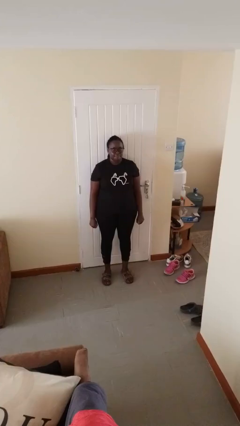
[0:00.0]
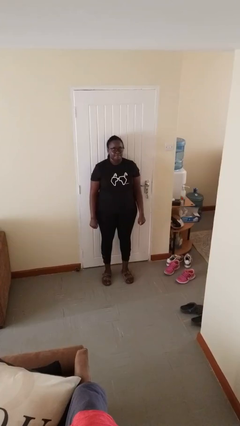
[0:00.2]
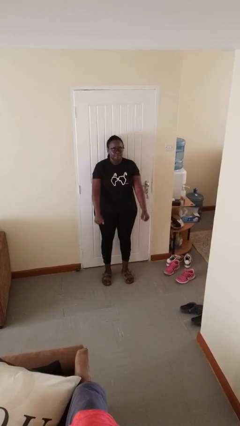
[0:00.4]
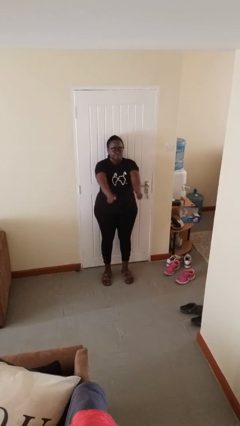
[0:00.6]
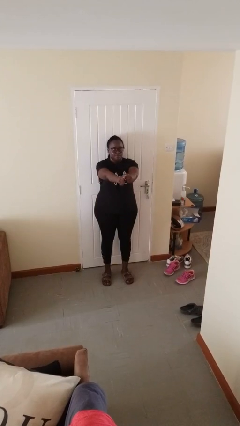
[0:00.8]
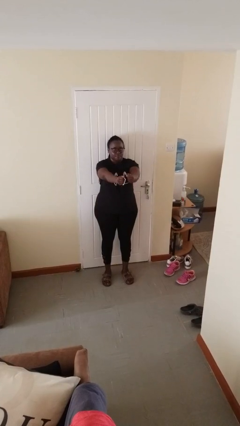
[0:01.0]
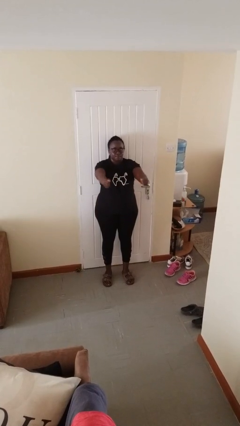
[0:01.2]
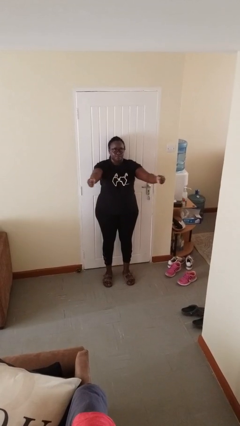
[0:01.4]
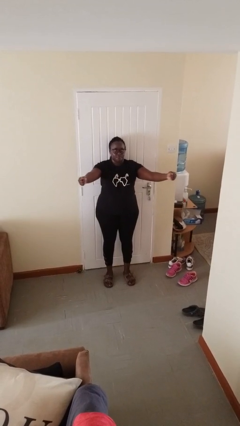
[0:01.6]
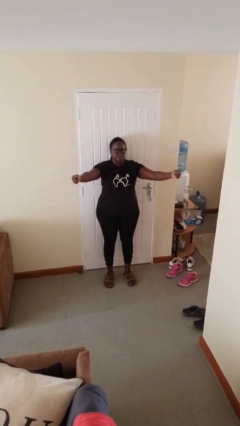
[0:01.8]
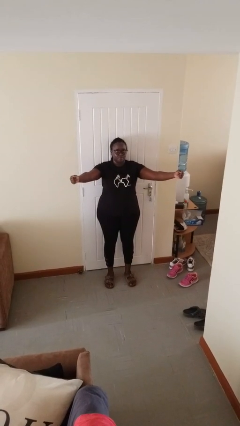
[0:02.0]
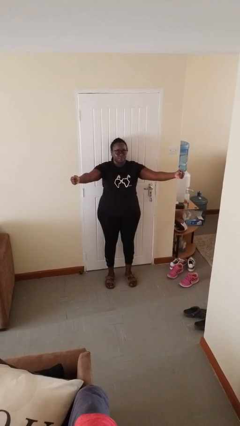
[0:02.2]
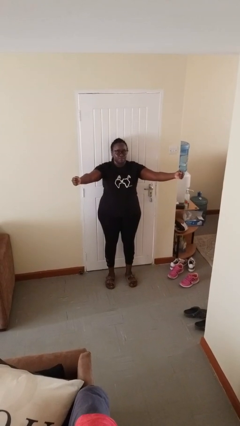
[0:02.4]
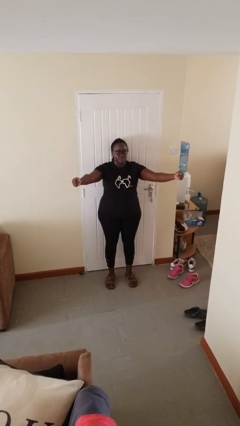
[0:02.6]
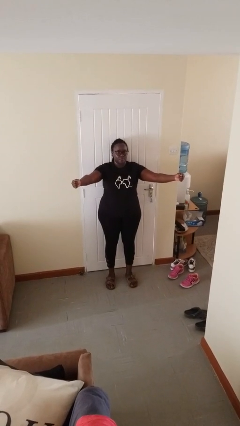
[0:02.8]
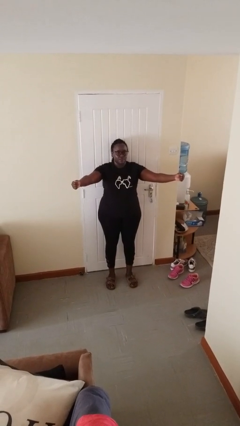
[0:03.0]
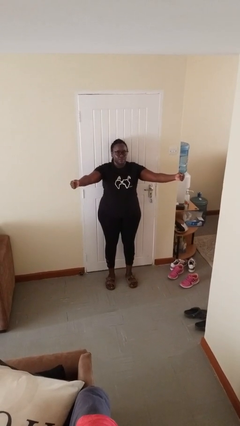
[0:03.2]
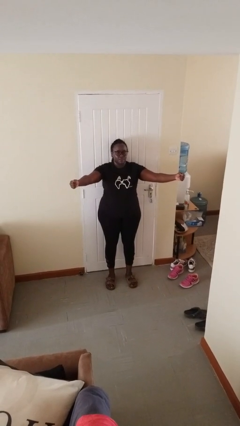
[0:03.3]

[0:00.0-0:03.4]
person gestures zoom in

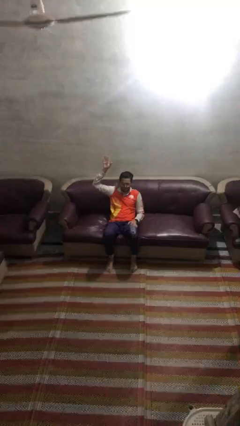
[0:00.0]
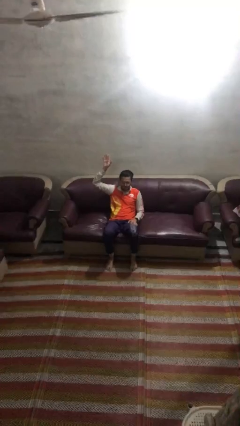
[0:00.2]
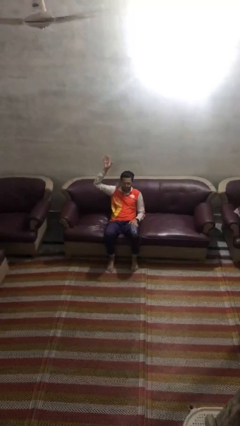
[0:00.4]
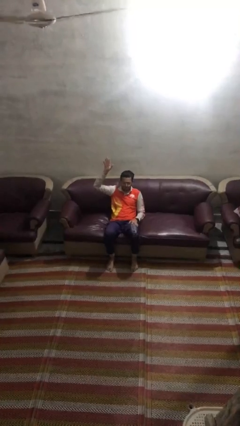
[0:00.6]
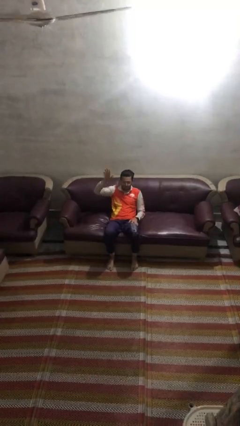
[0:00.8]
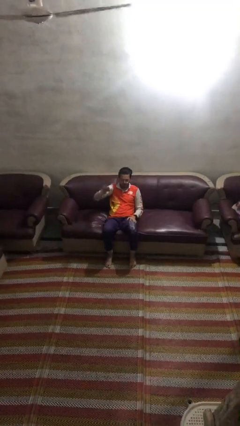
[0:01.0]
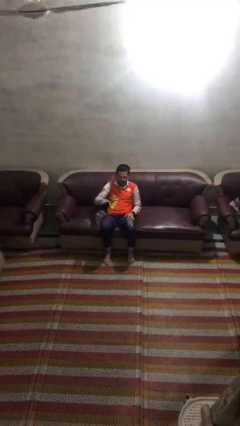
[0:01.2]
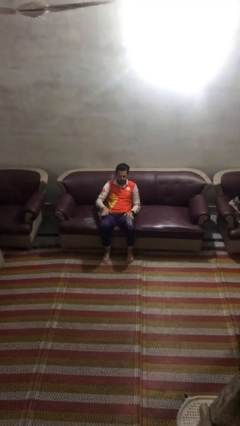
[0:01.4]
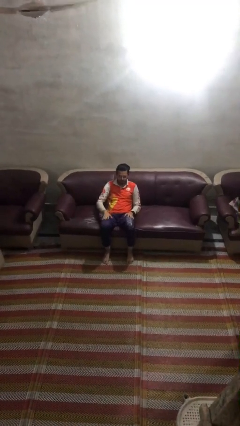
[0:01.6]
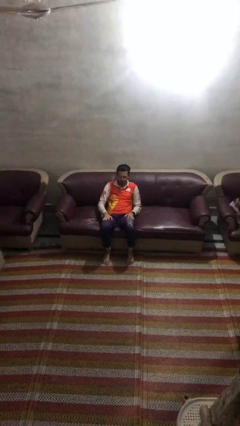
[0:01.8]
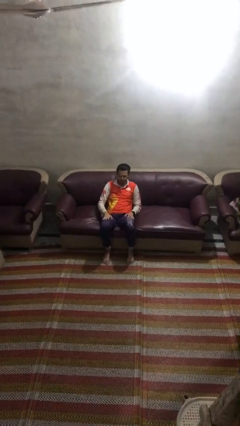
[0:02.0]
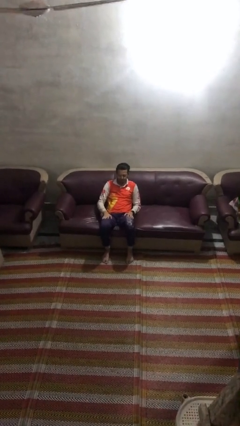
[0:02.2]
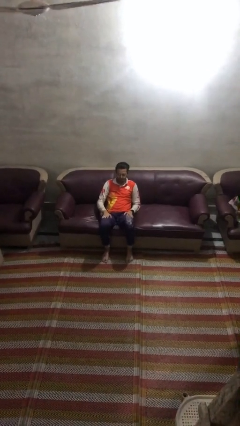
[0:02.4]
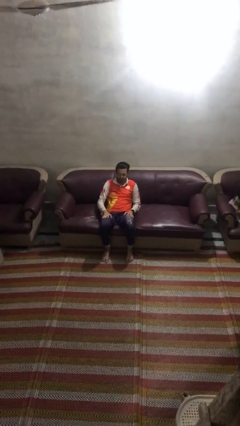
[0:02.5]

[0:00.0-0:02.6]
person gestures lower hand

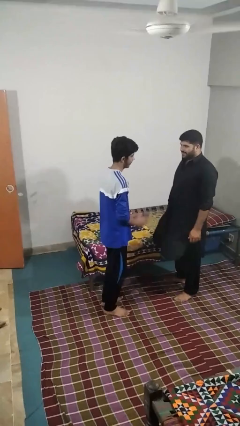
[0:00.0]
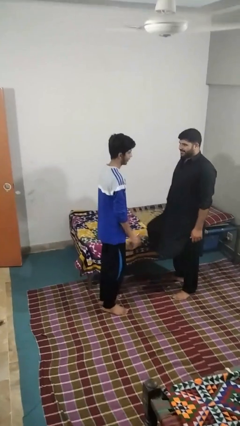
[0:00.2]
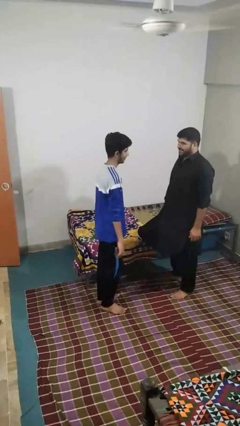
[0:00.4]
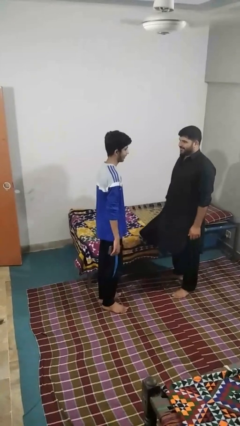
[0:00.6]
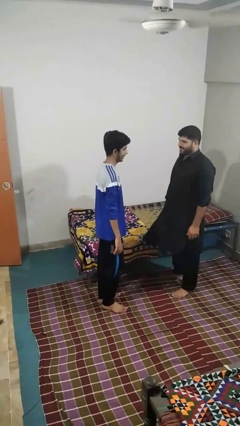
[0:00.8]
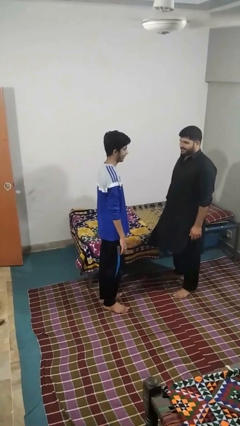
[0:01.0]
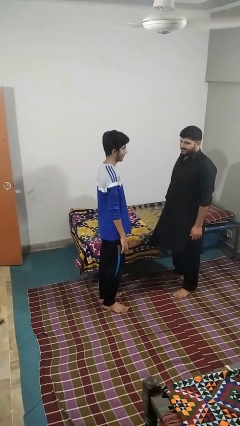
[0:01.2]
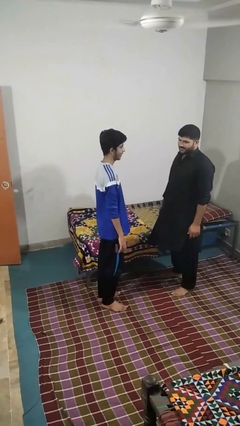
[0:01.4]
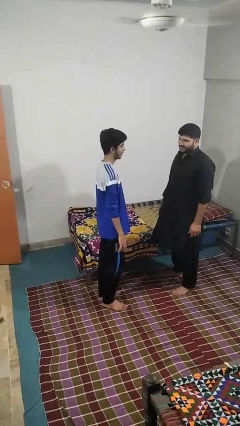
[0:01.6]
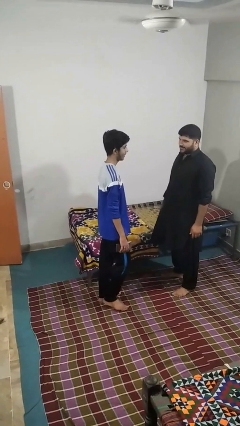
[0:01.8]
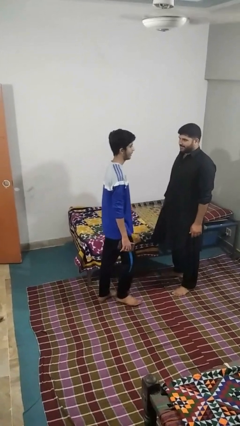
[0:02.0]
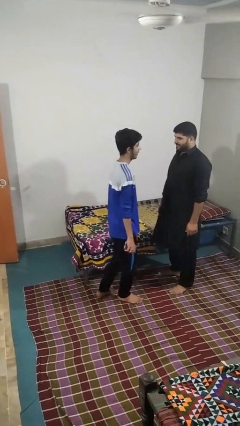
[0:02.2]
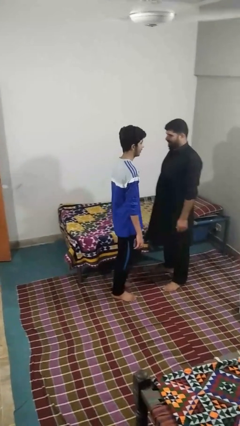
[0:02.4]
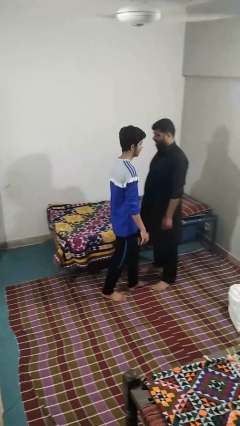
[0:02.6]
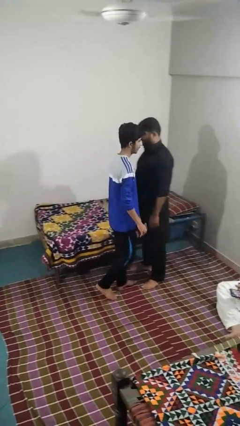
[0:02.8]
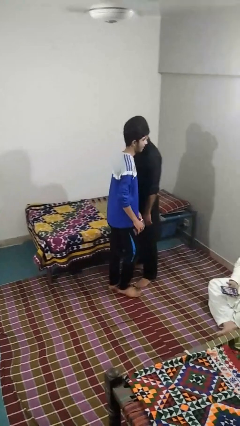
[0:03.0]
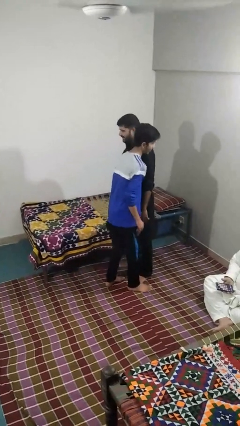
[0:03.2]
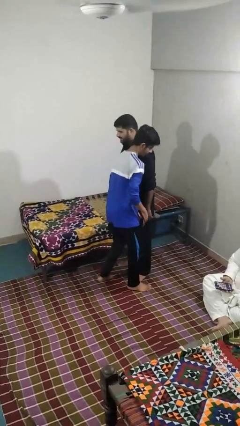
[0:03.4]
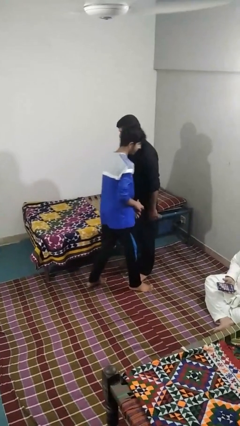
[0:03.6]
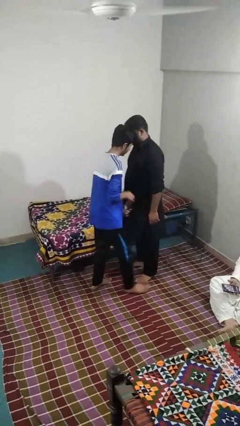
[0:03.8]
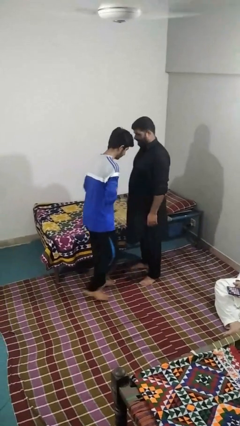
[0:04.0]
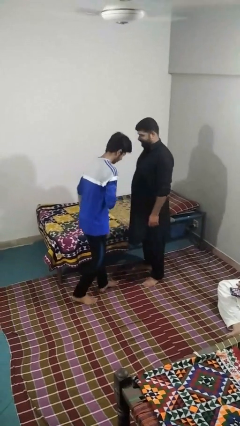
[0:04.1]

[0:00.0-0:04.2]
person bumps into person

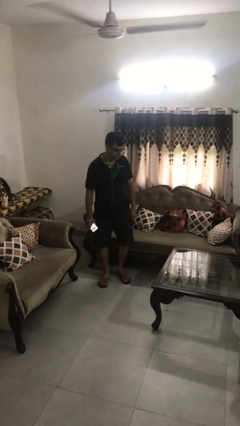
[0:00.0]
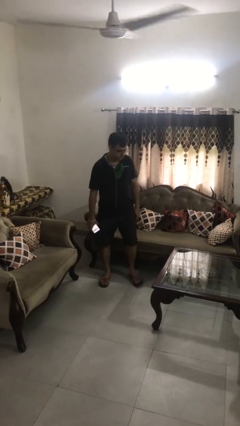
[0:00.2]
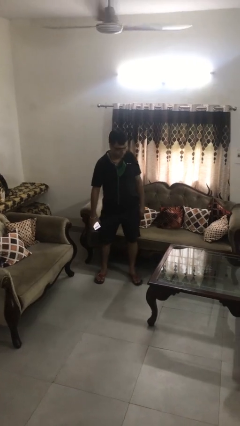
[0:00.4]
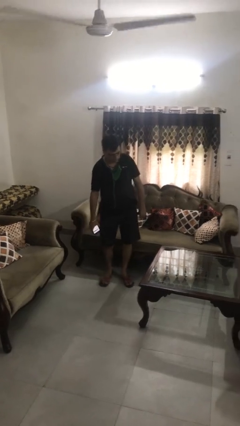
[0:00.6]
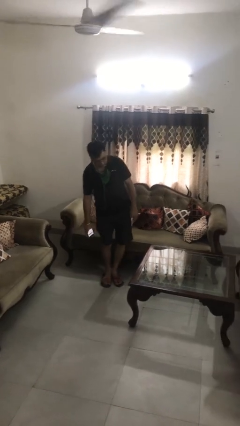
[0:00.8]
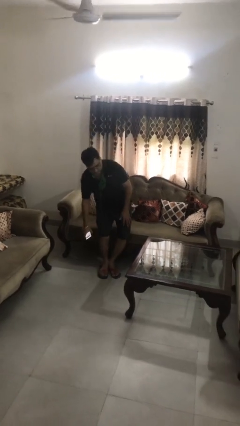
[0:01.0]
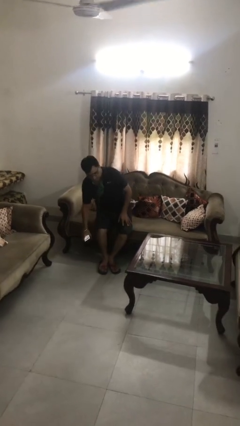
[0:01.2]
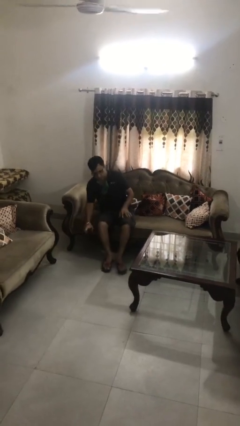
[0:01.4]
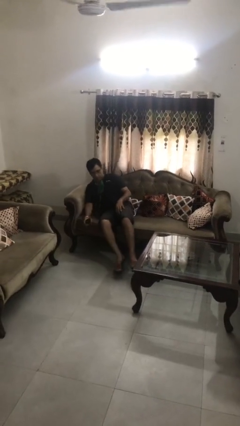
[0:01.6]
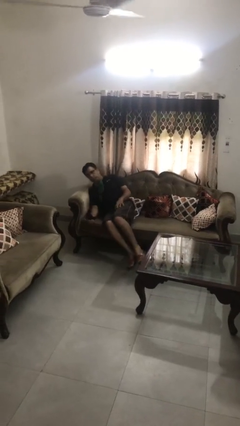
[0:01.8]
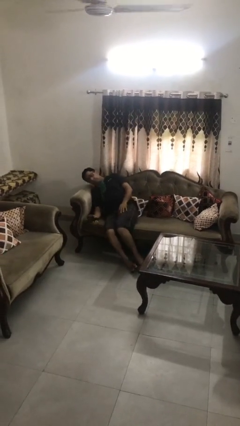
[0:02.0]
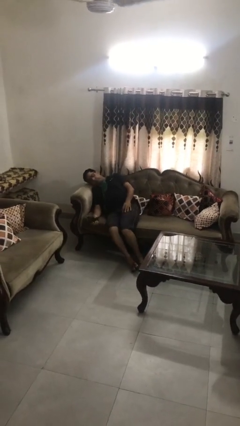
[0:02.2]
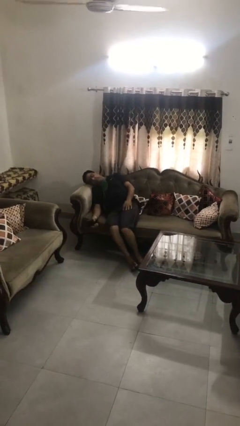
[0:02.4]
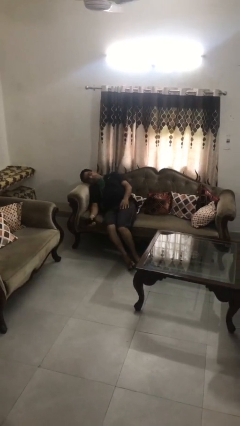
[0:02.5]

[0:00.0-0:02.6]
person lies down on couch

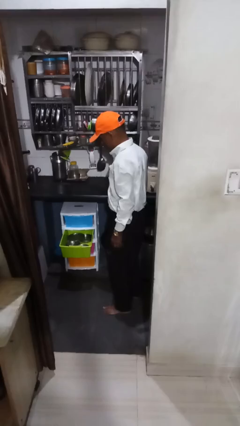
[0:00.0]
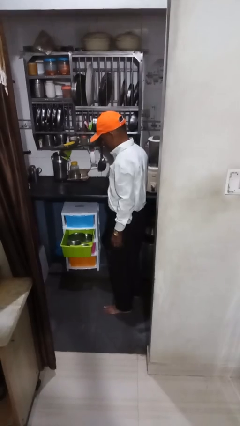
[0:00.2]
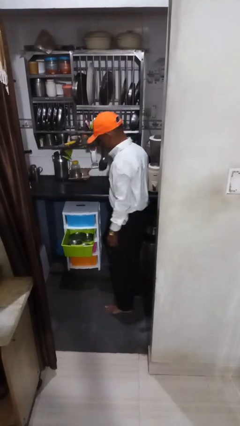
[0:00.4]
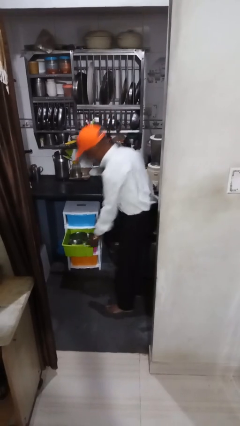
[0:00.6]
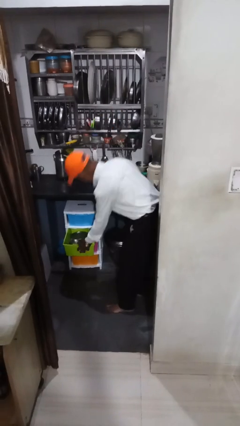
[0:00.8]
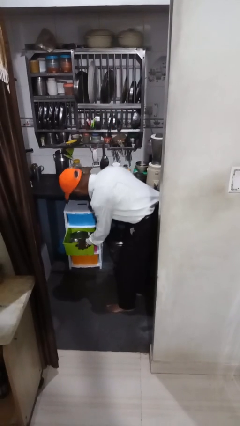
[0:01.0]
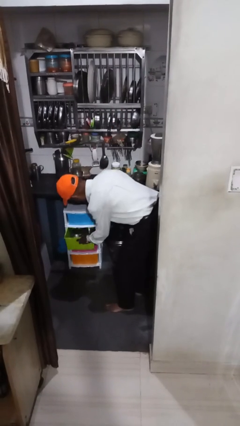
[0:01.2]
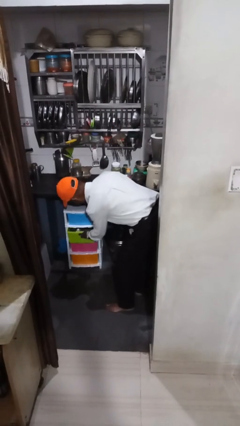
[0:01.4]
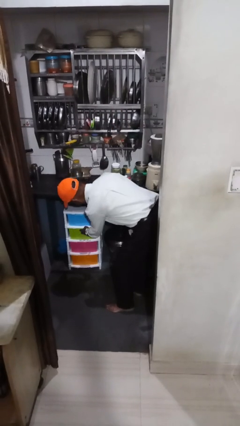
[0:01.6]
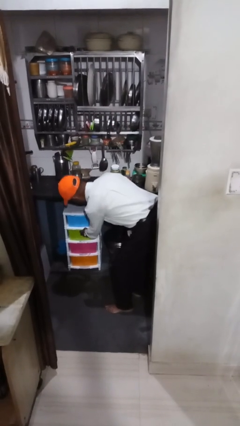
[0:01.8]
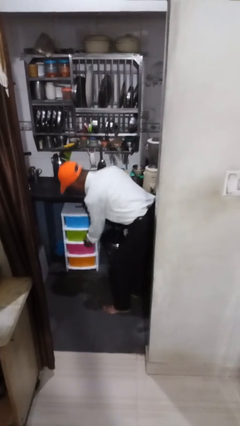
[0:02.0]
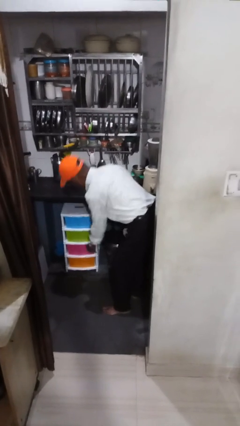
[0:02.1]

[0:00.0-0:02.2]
person closes kitchen drawer

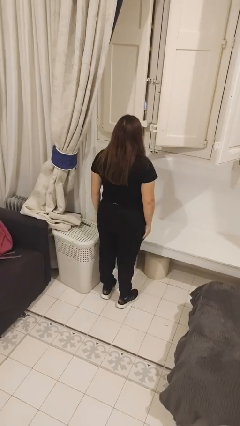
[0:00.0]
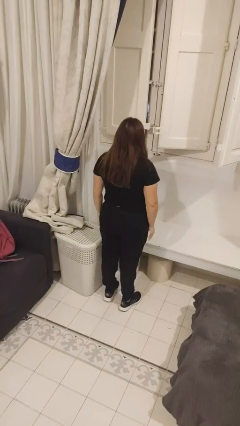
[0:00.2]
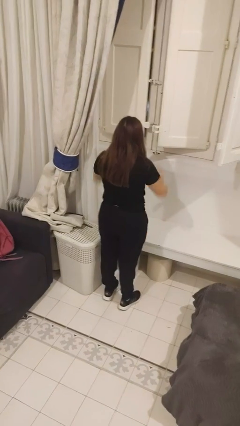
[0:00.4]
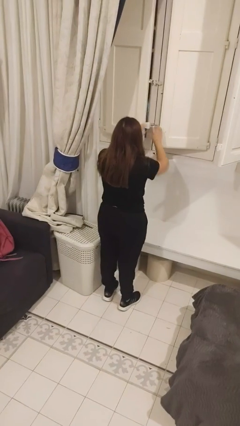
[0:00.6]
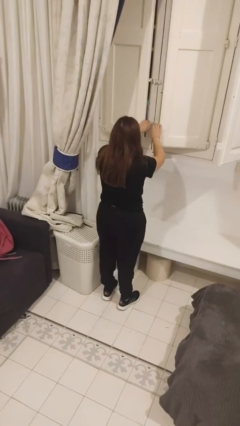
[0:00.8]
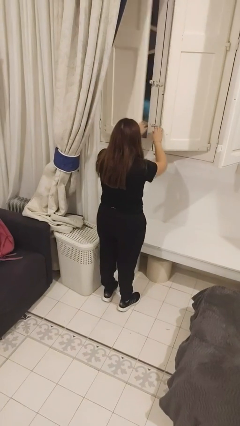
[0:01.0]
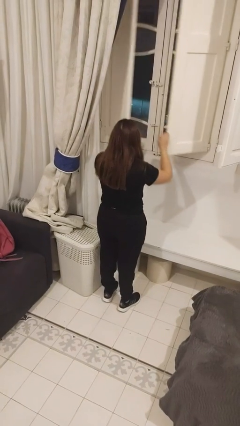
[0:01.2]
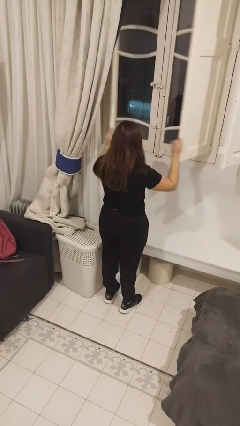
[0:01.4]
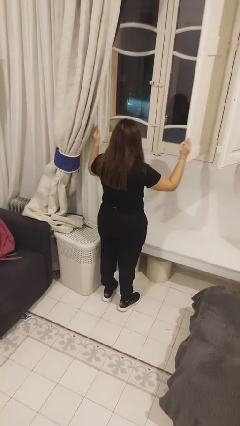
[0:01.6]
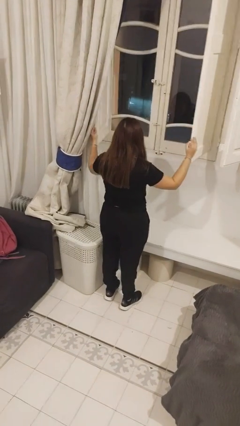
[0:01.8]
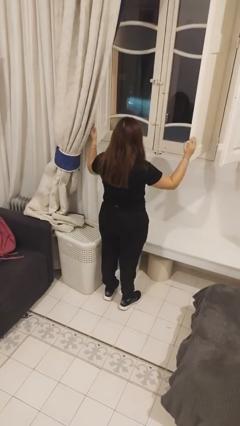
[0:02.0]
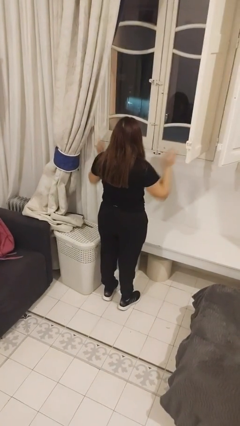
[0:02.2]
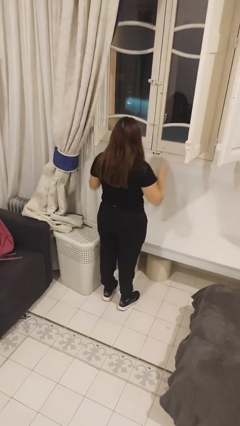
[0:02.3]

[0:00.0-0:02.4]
person opens home window
